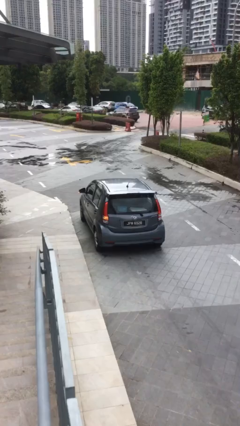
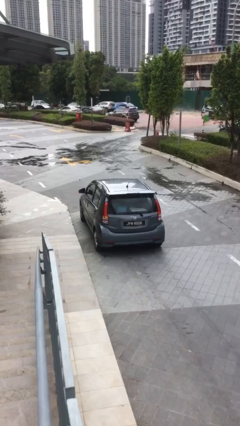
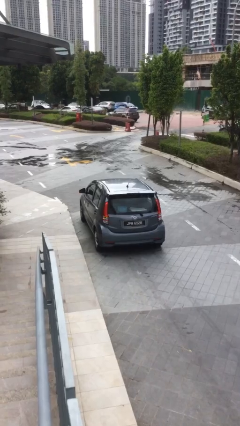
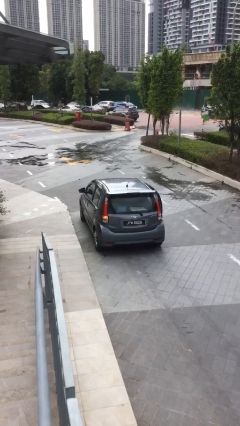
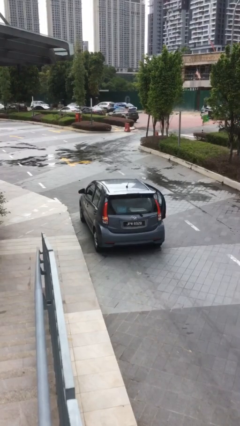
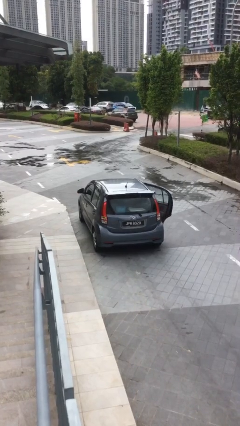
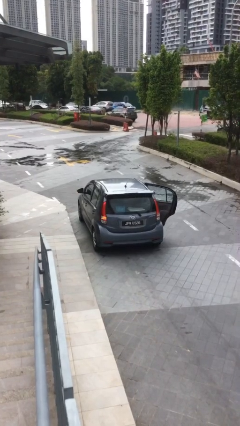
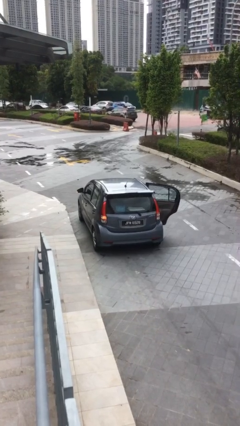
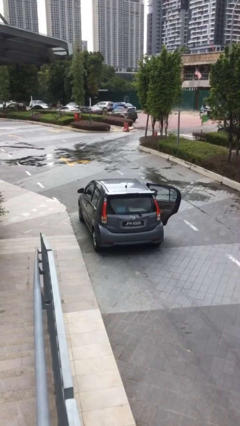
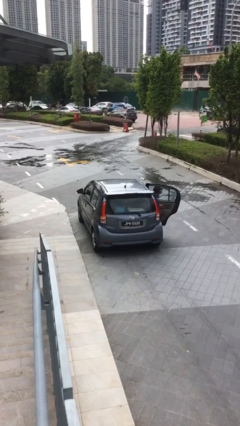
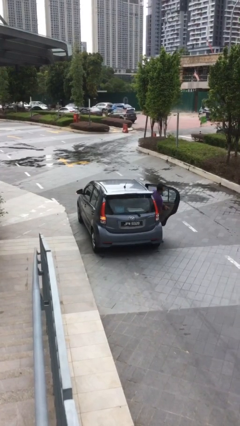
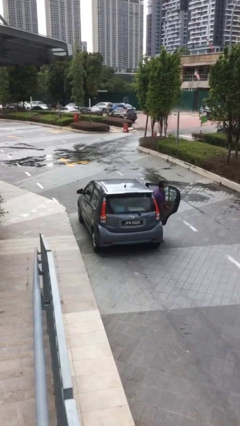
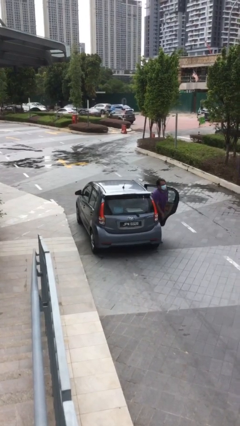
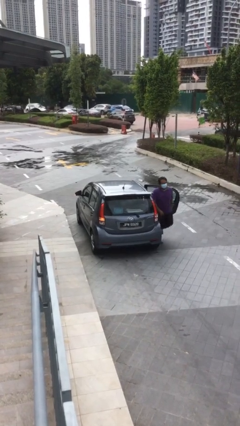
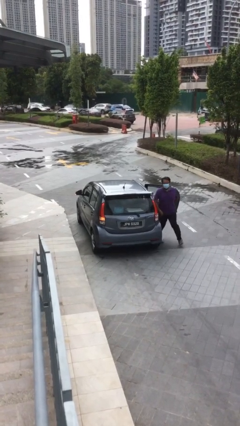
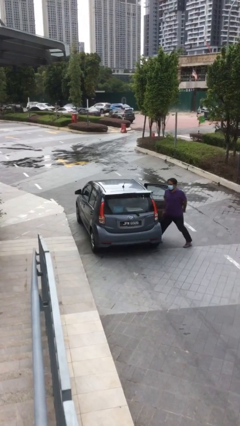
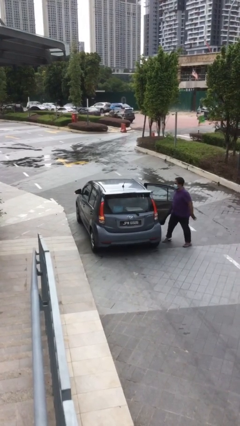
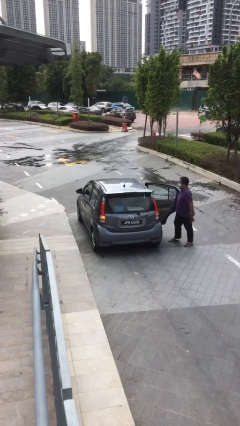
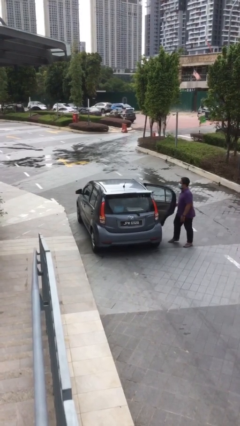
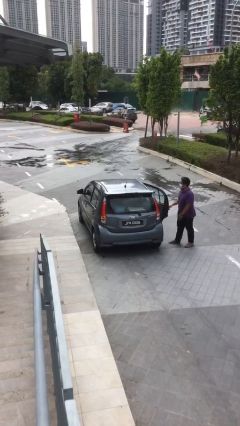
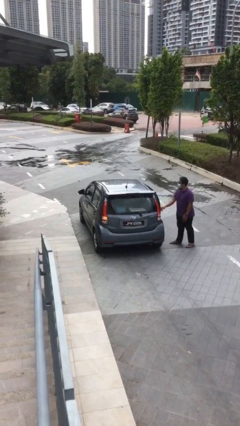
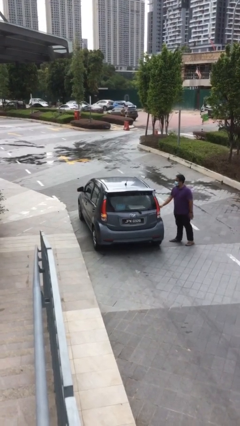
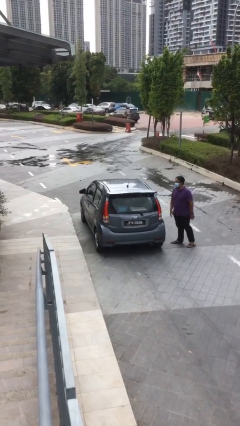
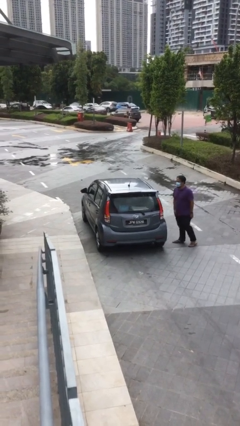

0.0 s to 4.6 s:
car drops off person

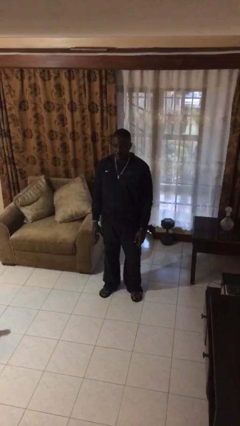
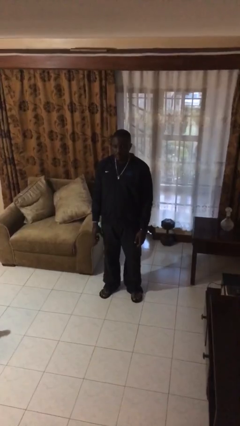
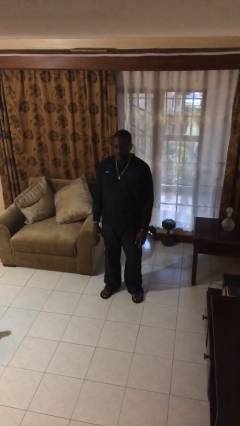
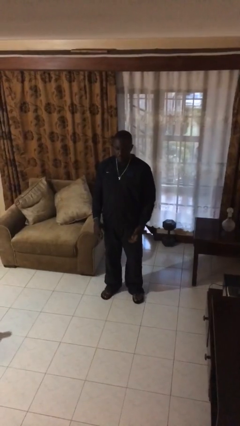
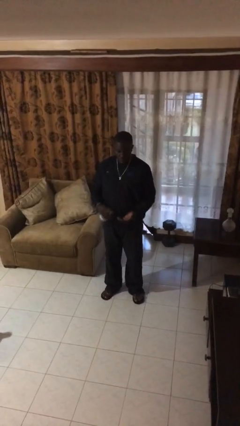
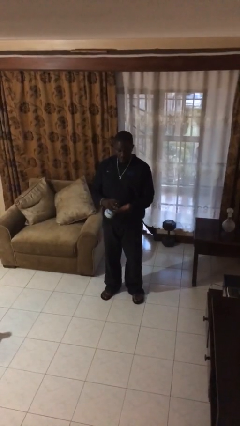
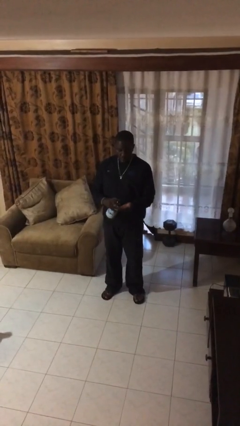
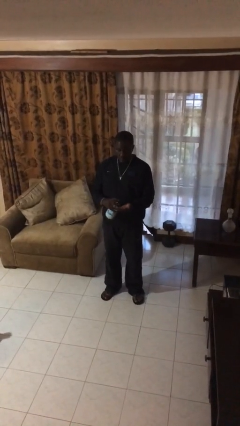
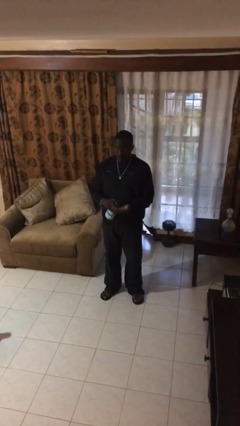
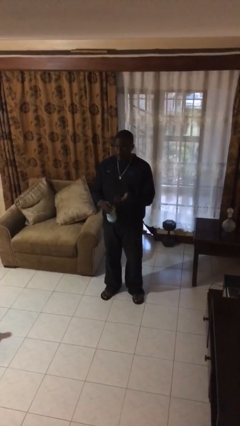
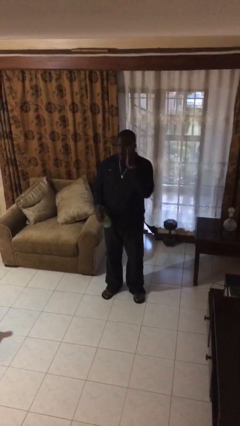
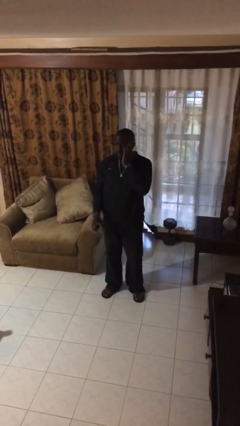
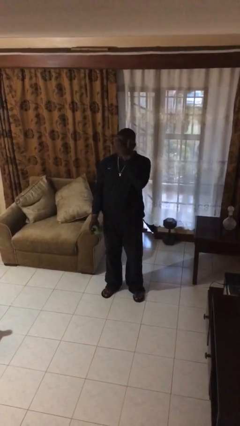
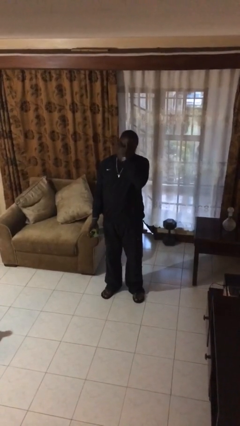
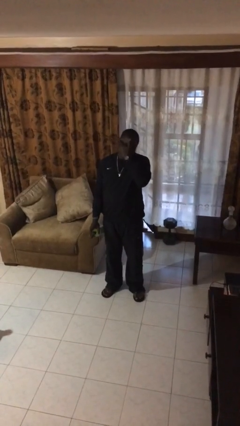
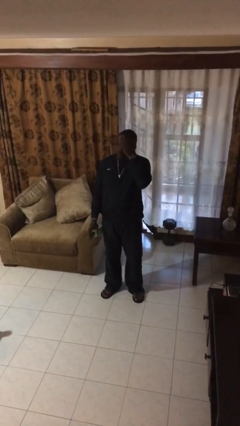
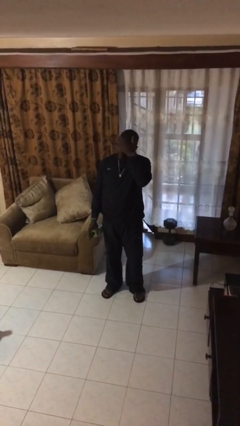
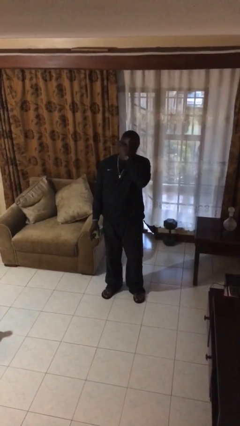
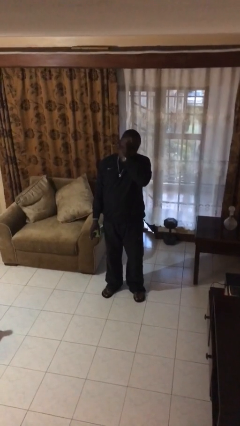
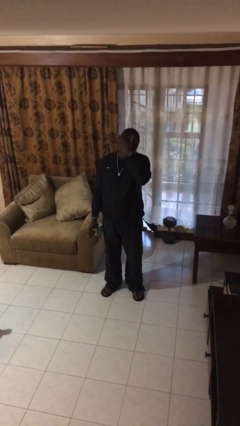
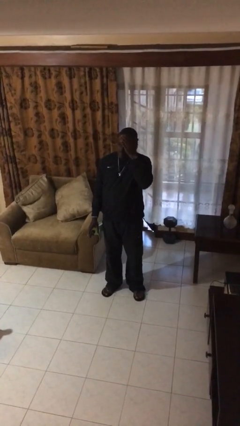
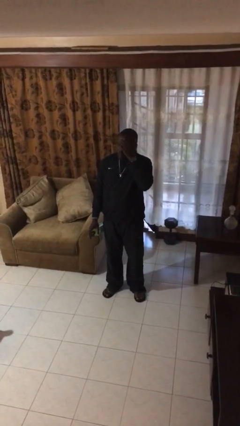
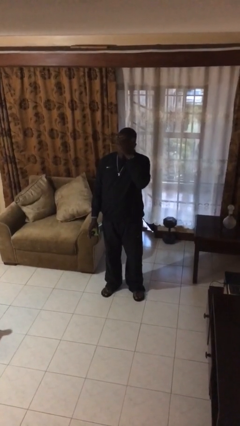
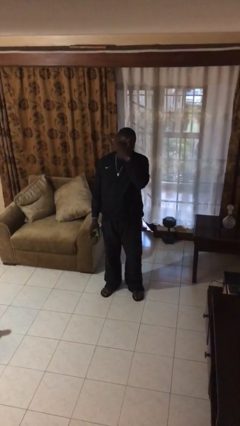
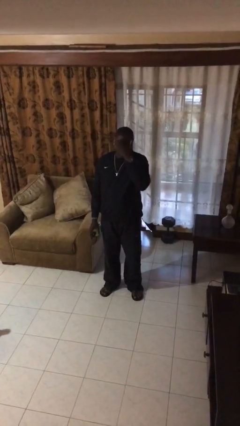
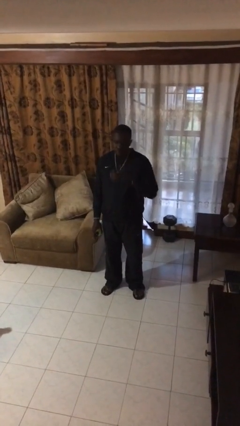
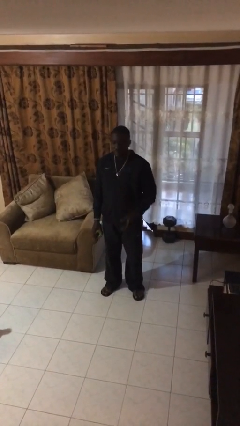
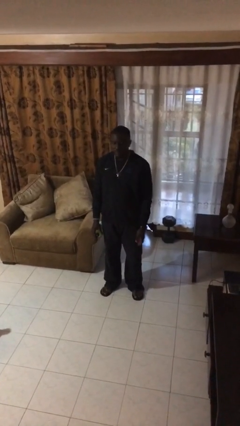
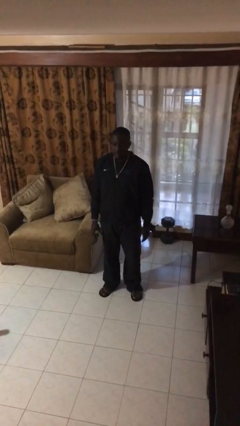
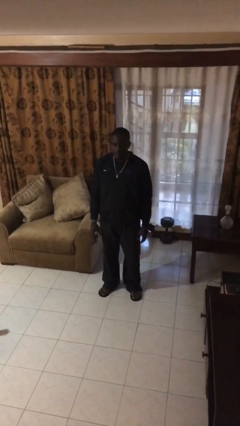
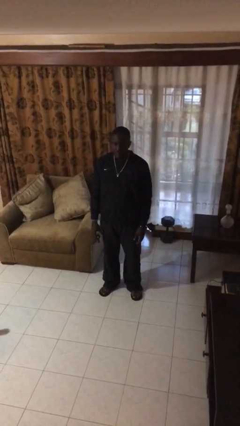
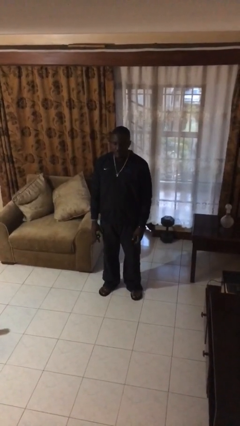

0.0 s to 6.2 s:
person applies facial moisturizer

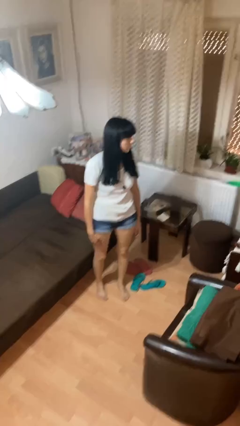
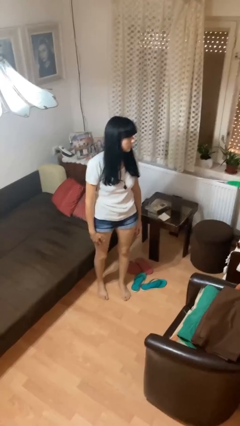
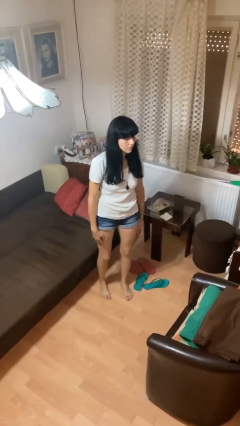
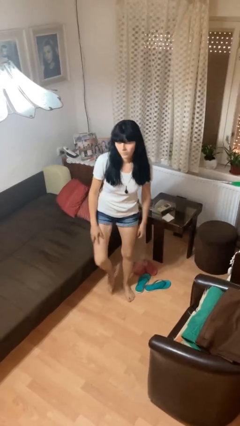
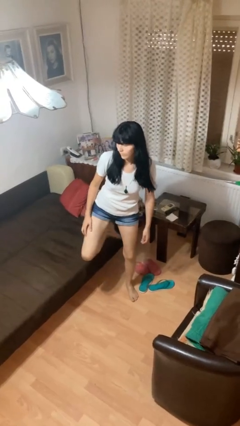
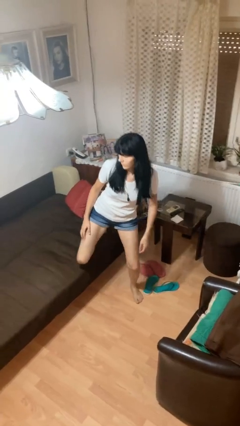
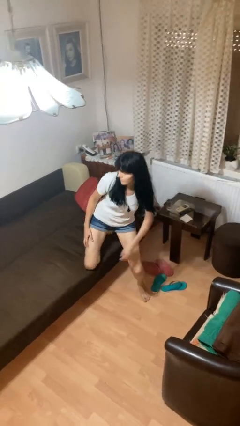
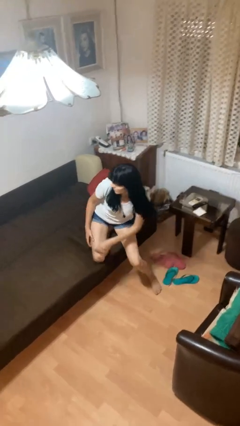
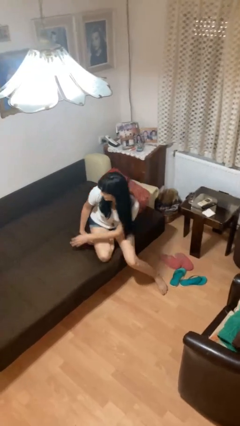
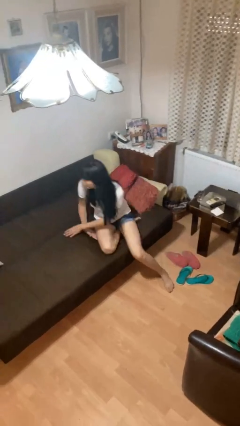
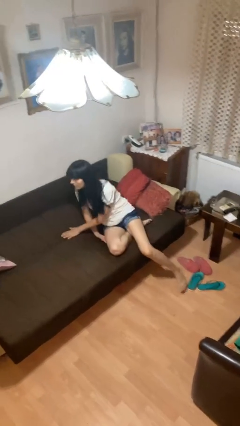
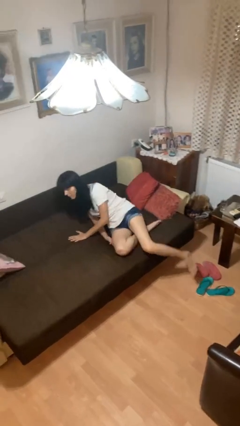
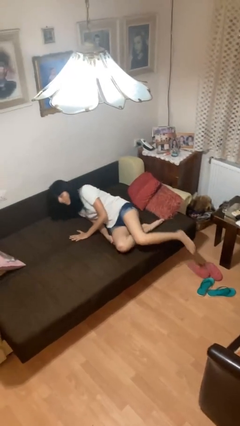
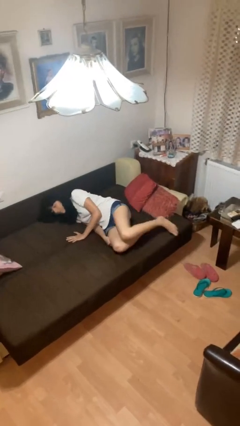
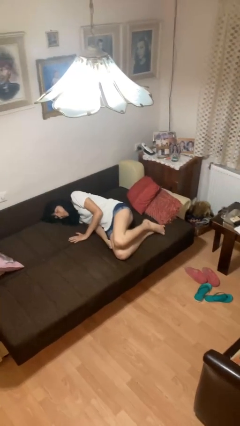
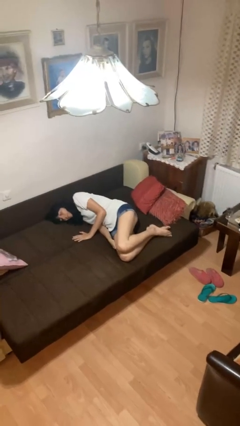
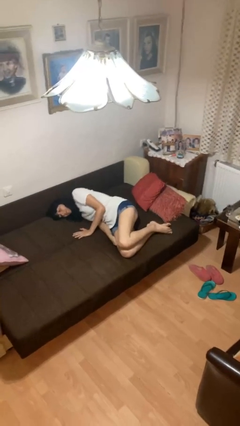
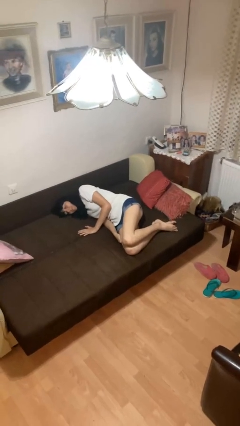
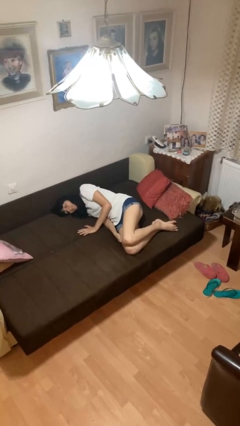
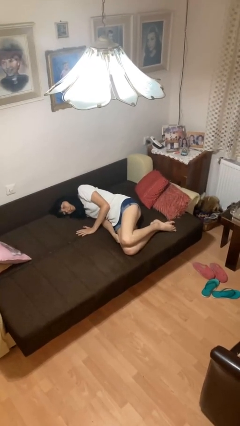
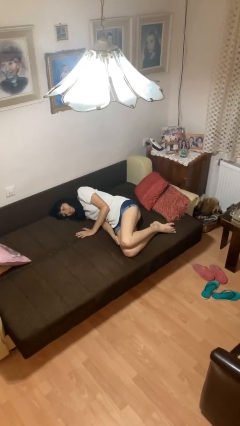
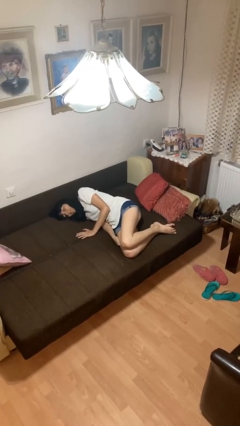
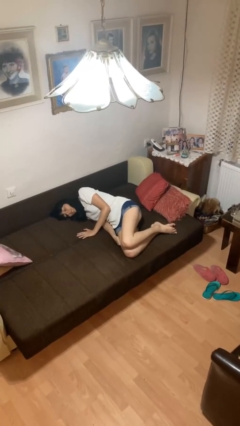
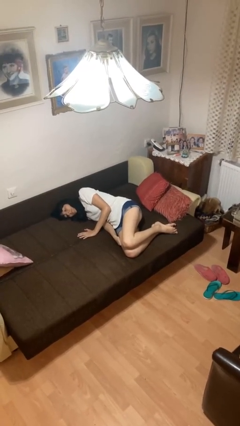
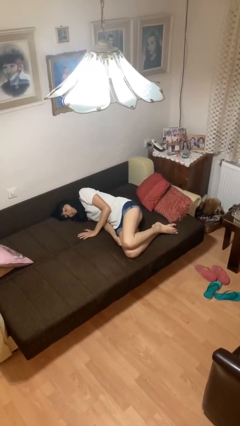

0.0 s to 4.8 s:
person lies down on bed

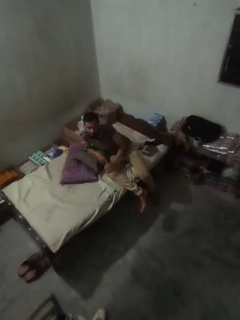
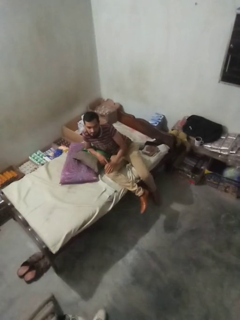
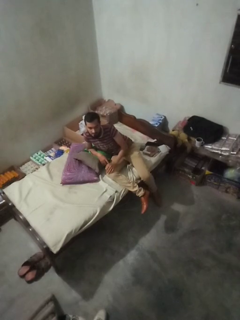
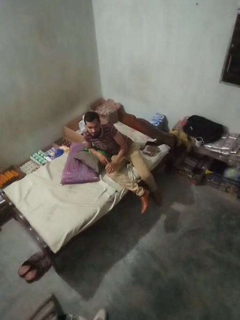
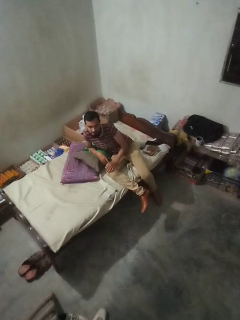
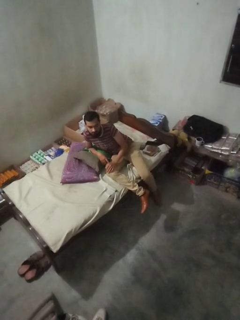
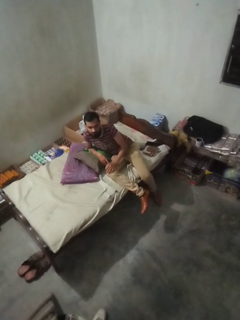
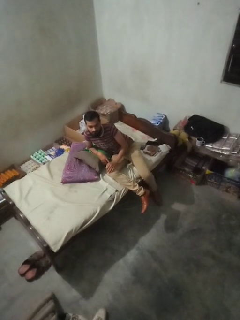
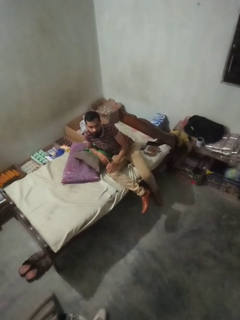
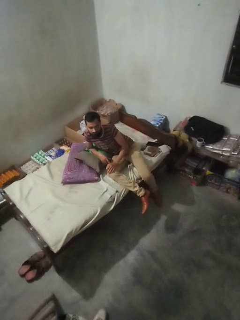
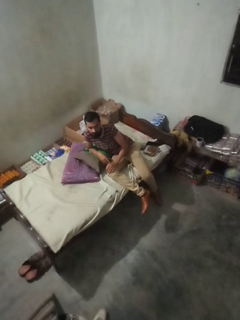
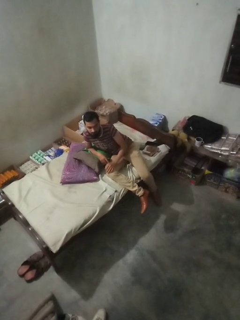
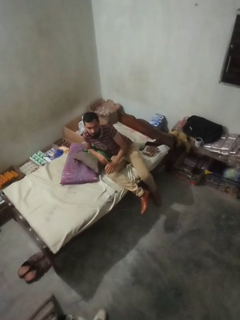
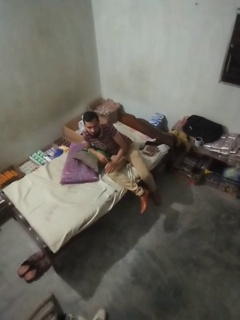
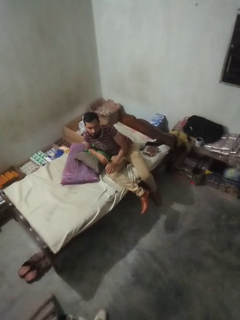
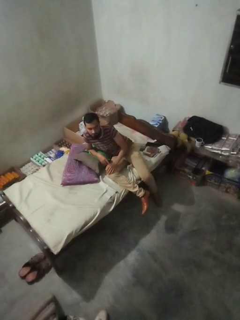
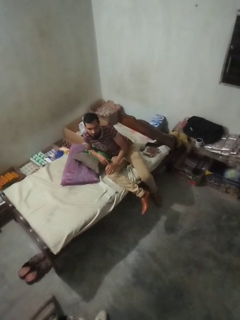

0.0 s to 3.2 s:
person strokes chin
